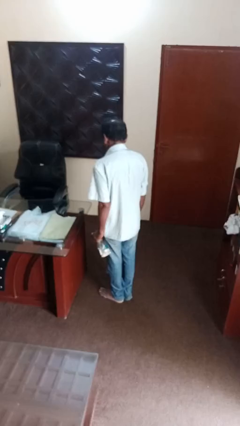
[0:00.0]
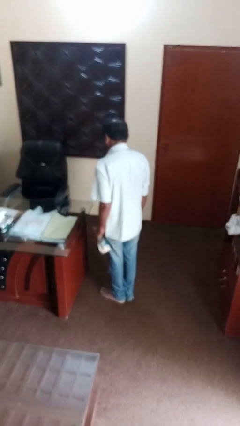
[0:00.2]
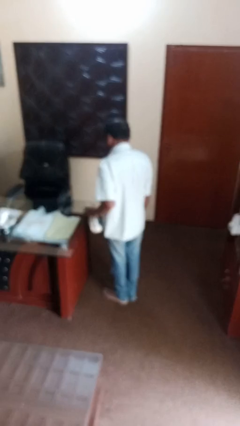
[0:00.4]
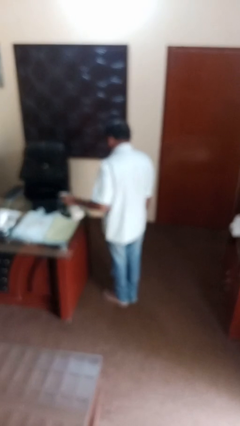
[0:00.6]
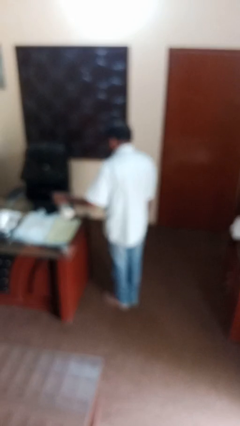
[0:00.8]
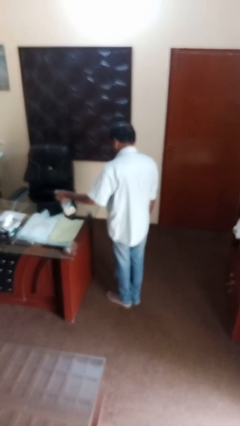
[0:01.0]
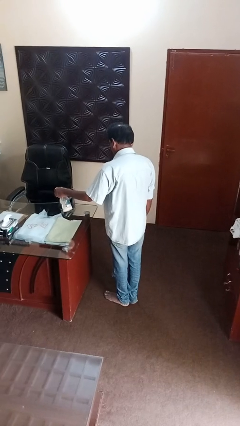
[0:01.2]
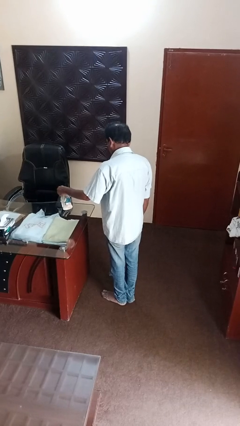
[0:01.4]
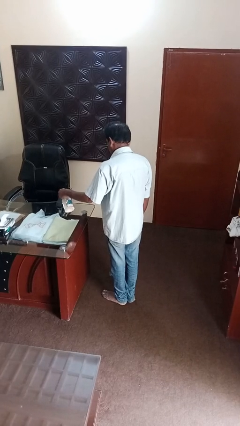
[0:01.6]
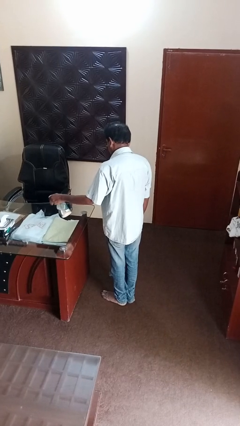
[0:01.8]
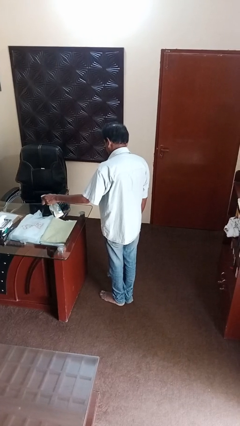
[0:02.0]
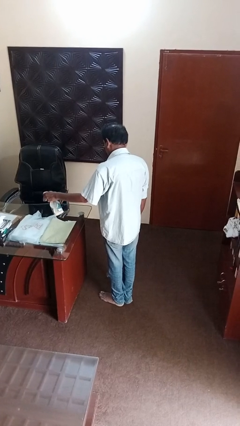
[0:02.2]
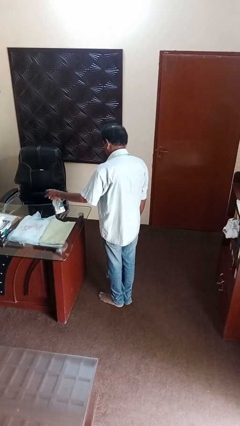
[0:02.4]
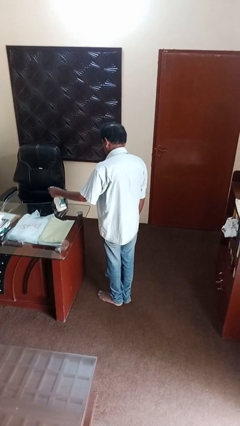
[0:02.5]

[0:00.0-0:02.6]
person sprays from bottle

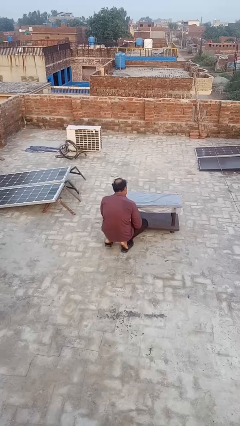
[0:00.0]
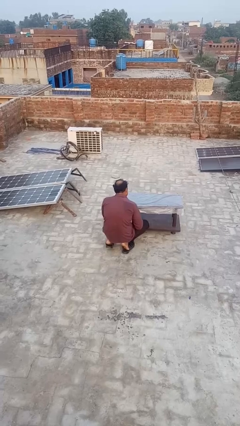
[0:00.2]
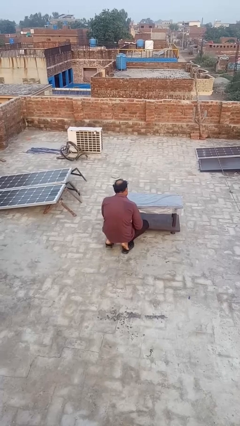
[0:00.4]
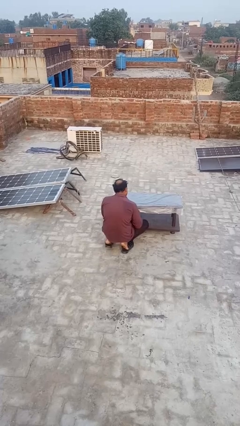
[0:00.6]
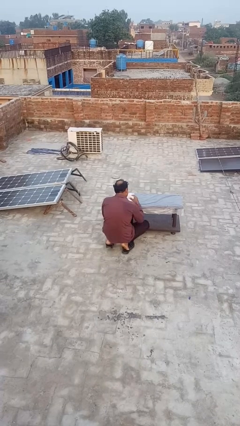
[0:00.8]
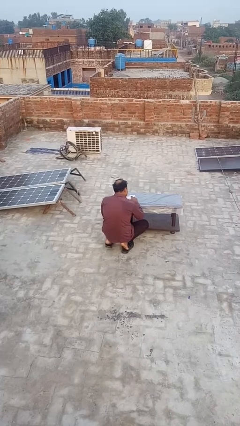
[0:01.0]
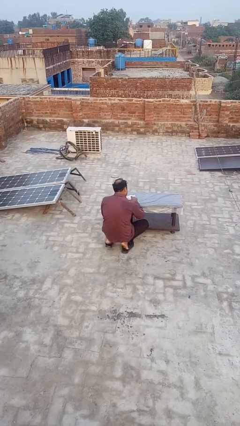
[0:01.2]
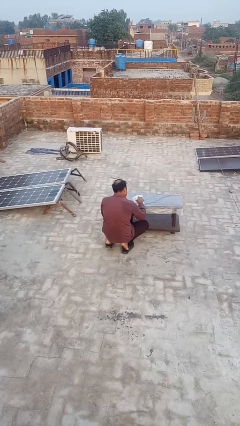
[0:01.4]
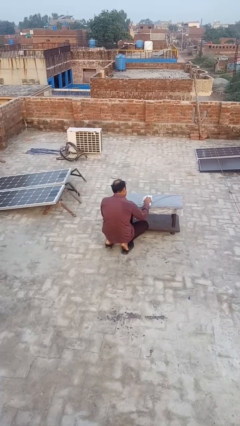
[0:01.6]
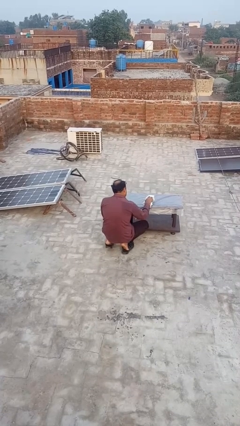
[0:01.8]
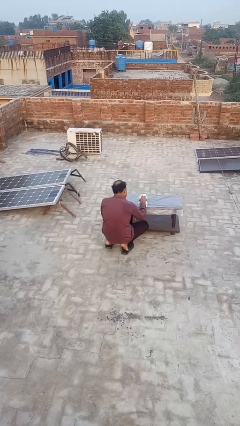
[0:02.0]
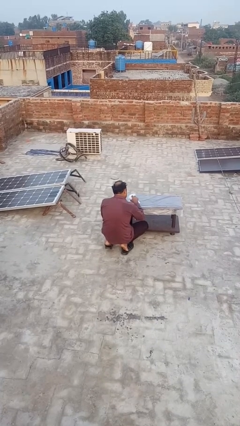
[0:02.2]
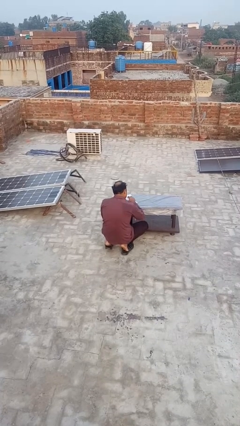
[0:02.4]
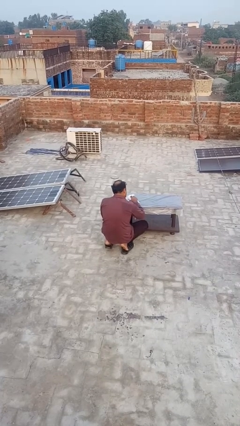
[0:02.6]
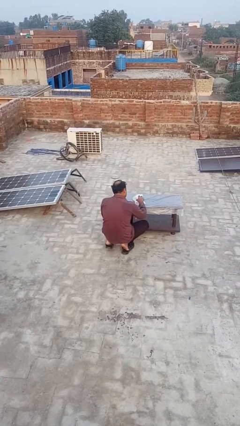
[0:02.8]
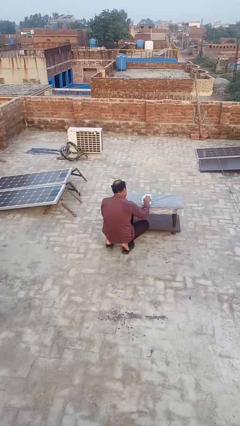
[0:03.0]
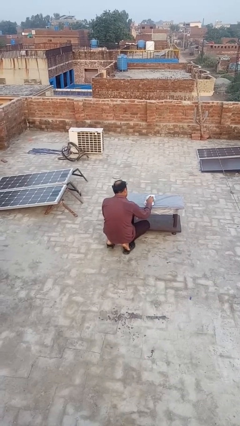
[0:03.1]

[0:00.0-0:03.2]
person cleans table with rag

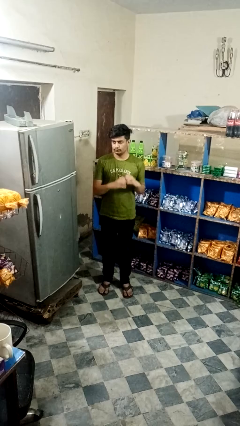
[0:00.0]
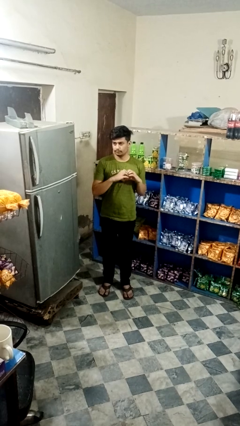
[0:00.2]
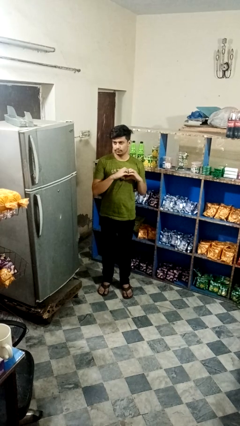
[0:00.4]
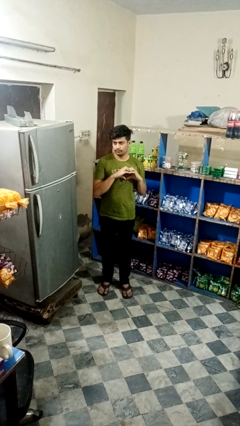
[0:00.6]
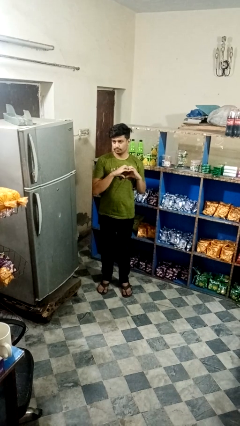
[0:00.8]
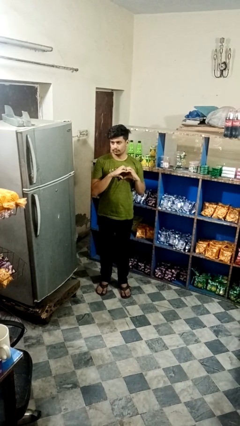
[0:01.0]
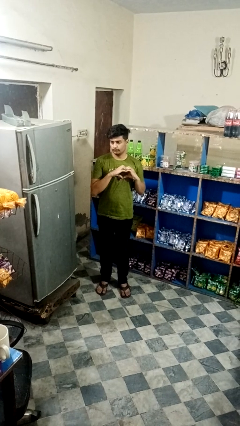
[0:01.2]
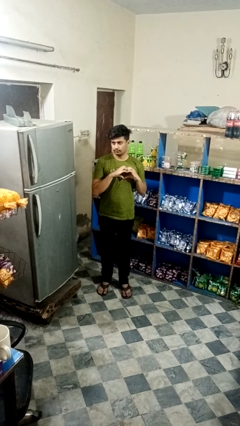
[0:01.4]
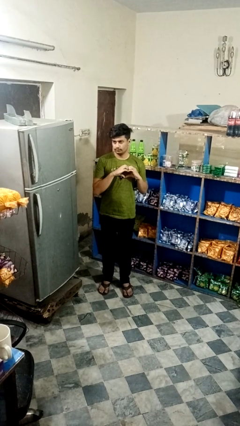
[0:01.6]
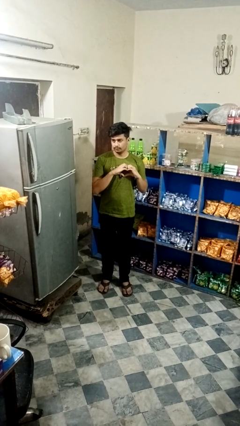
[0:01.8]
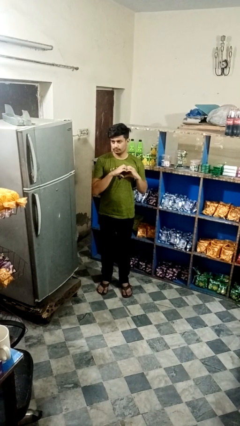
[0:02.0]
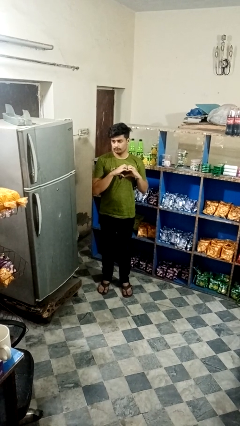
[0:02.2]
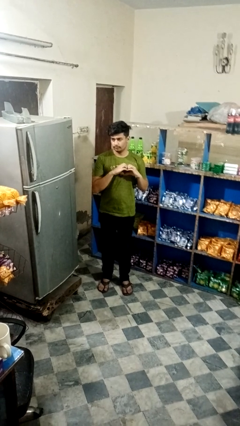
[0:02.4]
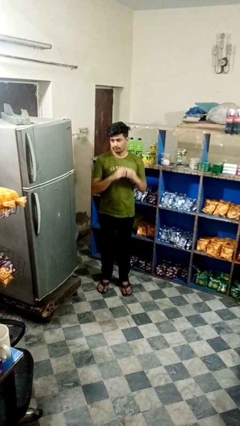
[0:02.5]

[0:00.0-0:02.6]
person gestures heart

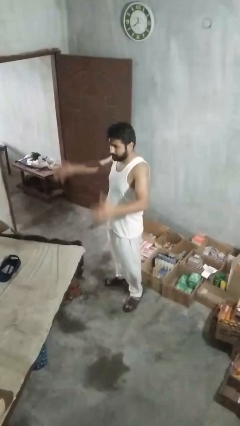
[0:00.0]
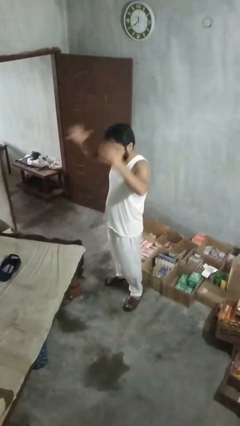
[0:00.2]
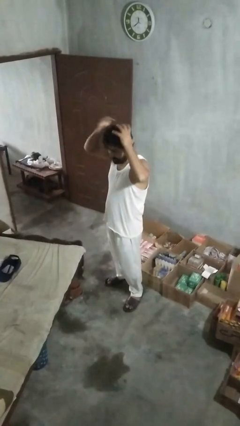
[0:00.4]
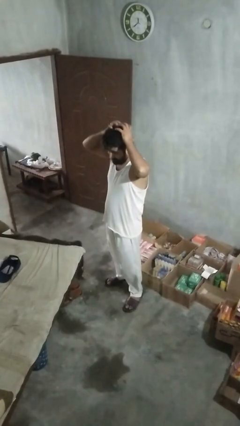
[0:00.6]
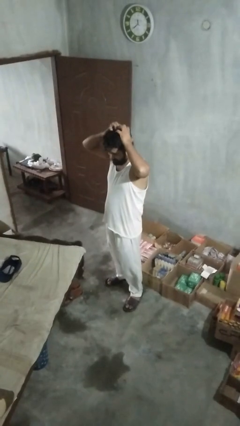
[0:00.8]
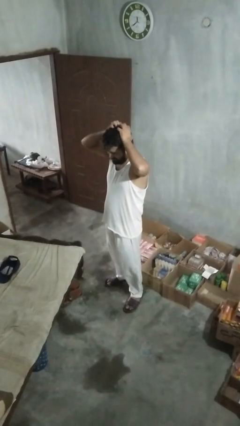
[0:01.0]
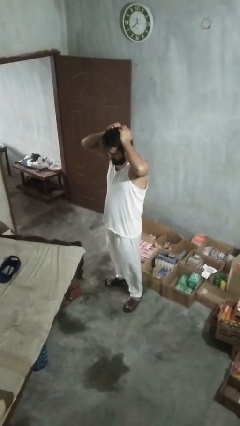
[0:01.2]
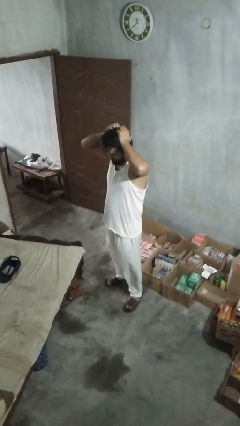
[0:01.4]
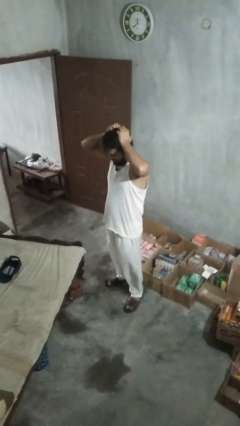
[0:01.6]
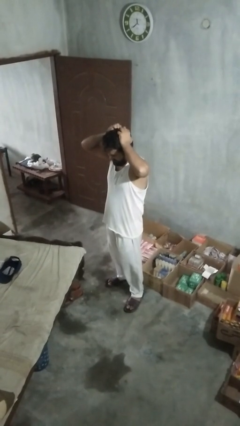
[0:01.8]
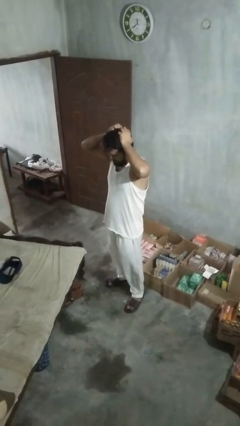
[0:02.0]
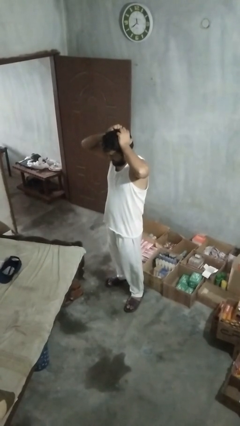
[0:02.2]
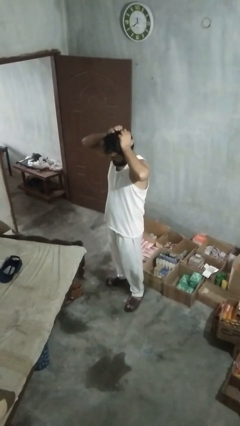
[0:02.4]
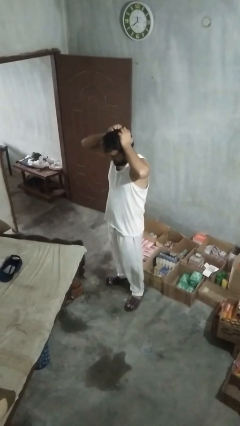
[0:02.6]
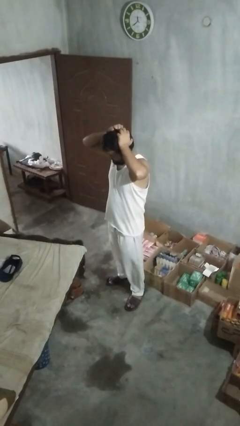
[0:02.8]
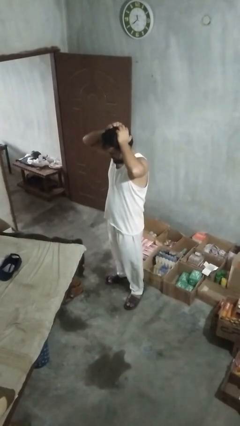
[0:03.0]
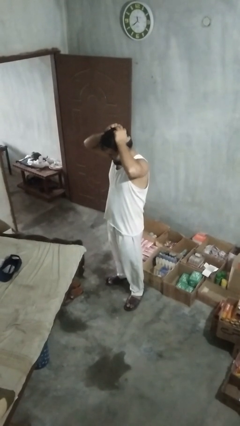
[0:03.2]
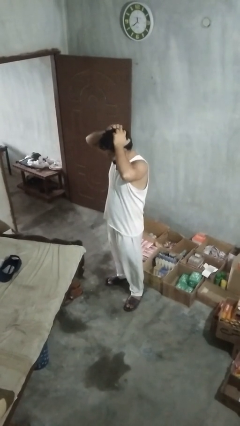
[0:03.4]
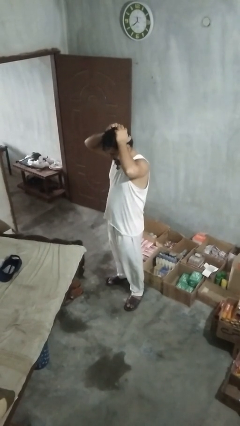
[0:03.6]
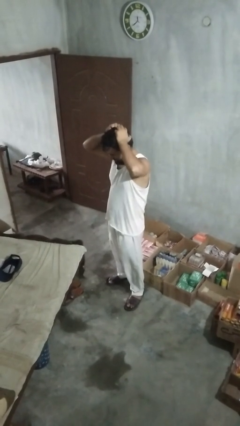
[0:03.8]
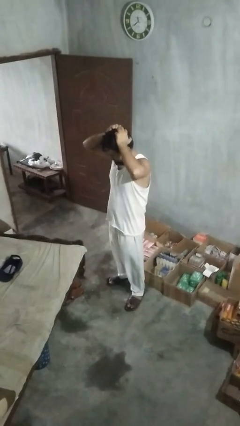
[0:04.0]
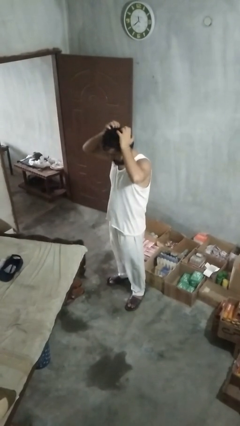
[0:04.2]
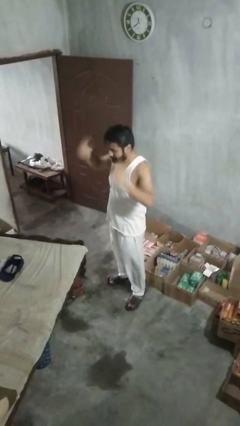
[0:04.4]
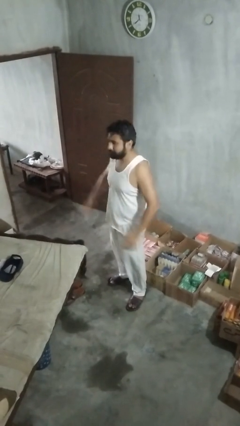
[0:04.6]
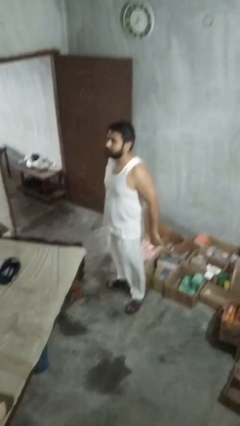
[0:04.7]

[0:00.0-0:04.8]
person scratches face

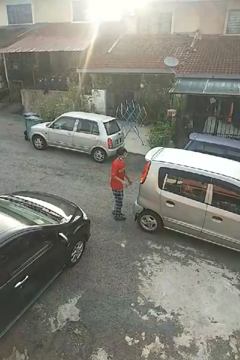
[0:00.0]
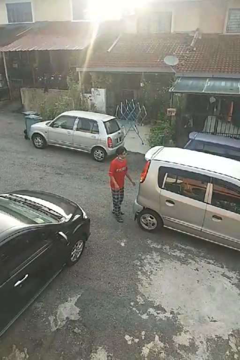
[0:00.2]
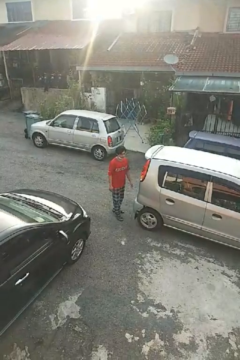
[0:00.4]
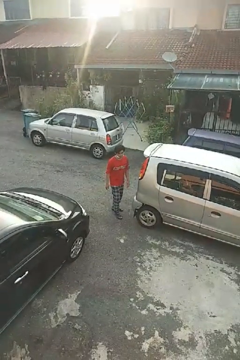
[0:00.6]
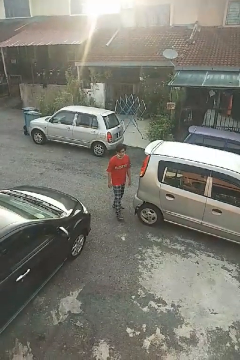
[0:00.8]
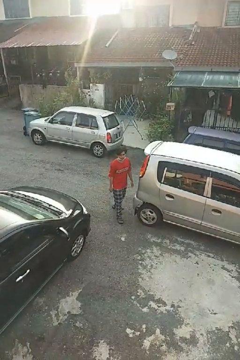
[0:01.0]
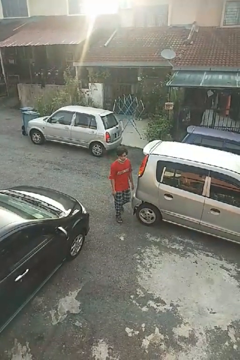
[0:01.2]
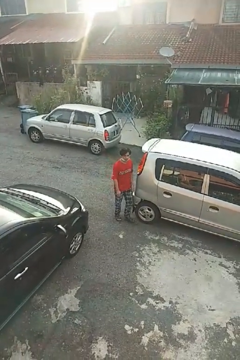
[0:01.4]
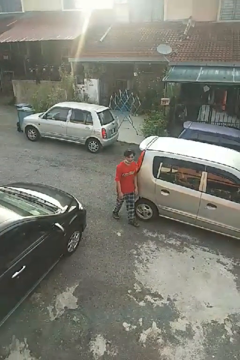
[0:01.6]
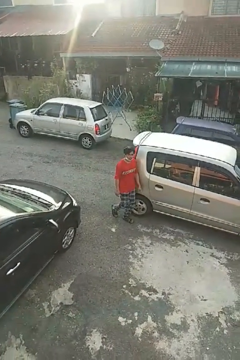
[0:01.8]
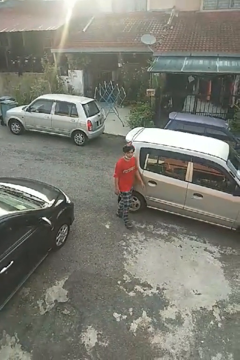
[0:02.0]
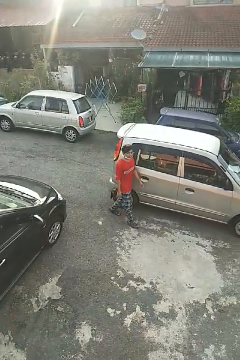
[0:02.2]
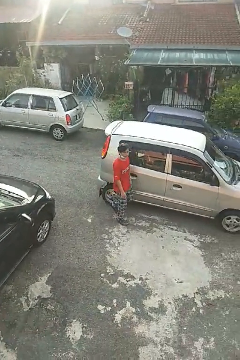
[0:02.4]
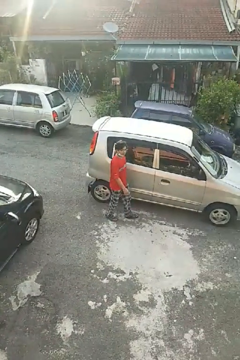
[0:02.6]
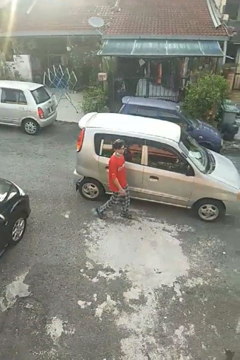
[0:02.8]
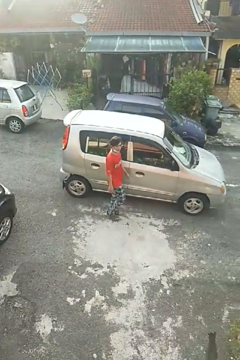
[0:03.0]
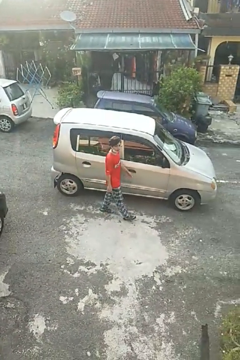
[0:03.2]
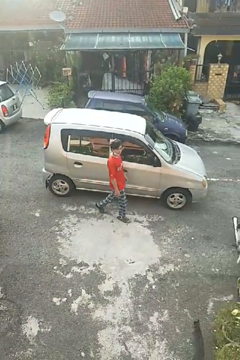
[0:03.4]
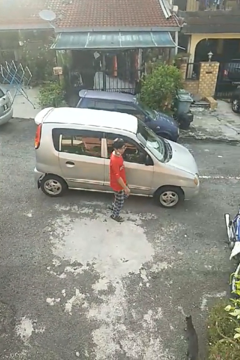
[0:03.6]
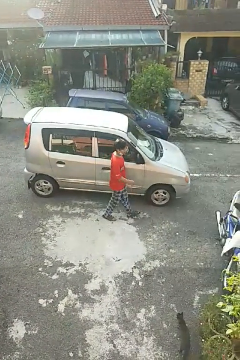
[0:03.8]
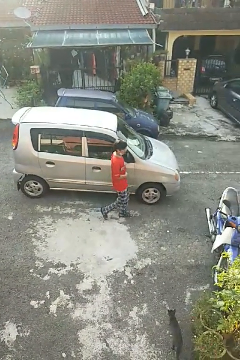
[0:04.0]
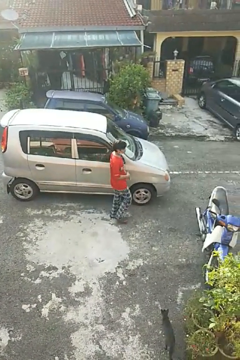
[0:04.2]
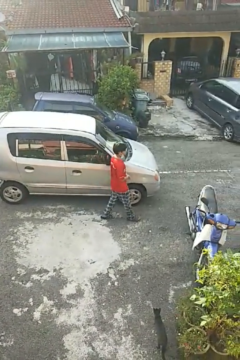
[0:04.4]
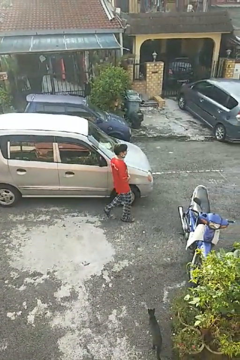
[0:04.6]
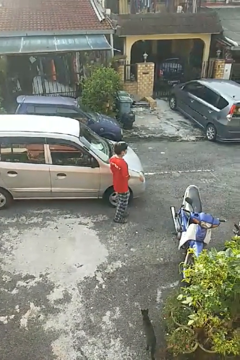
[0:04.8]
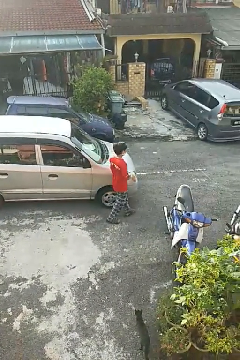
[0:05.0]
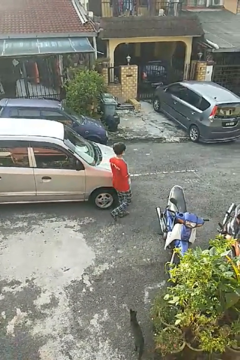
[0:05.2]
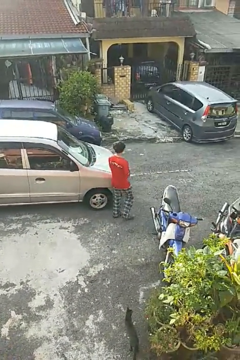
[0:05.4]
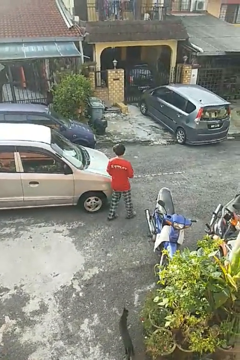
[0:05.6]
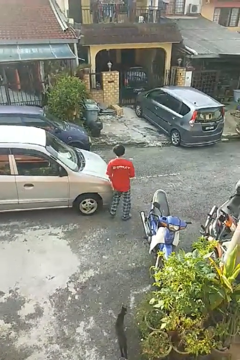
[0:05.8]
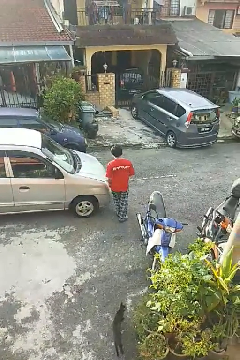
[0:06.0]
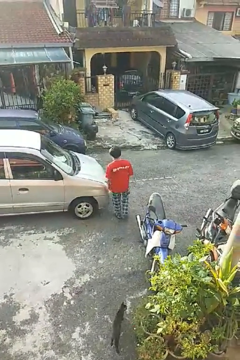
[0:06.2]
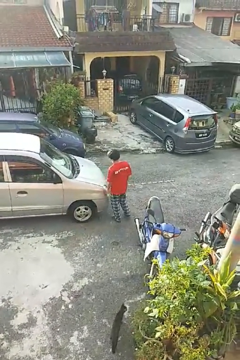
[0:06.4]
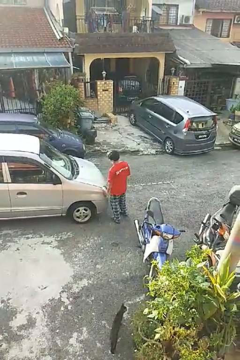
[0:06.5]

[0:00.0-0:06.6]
person walks around car
